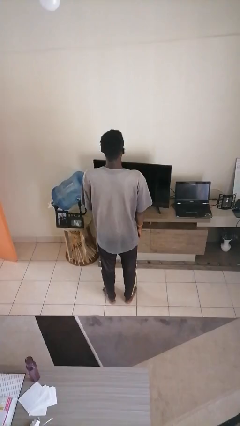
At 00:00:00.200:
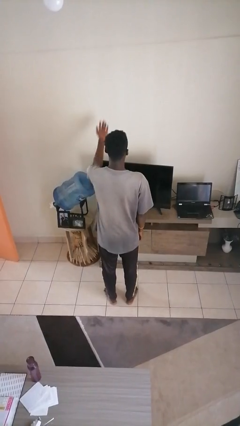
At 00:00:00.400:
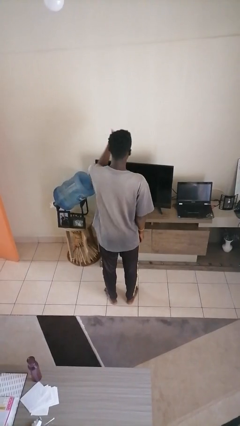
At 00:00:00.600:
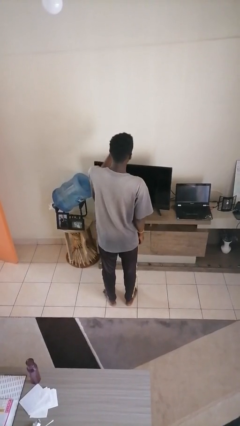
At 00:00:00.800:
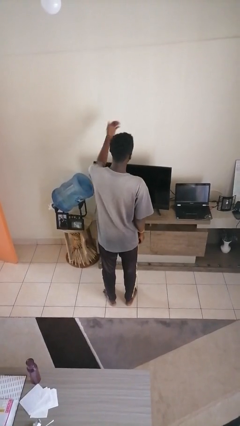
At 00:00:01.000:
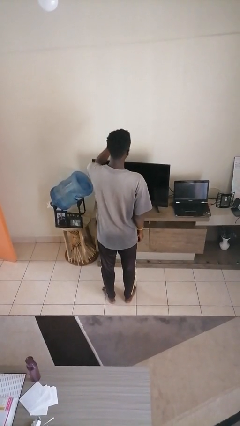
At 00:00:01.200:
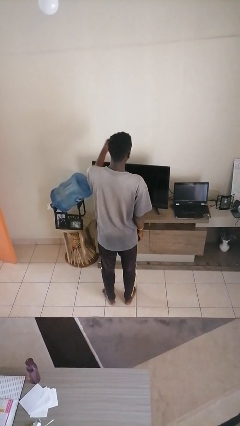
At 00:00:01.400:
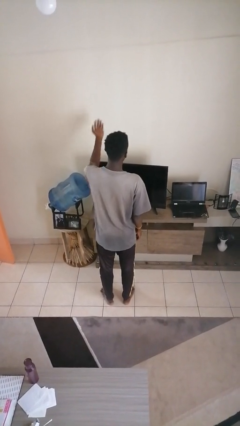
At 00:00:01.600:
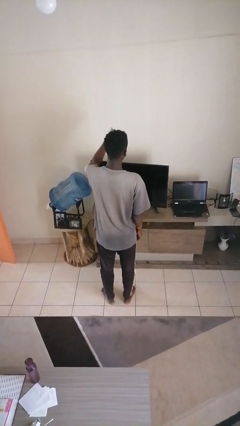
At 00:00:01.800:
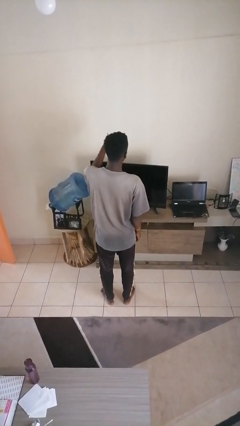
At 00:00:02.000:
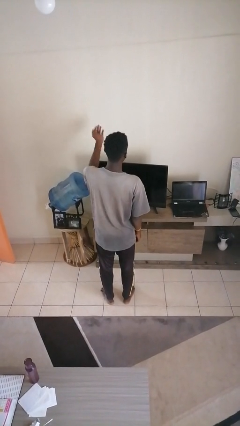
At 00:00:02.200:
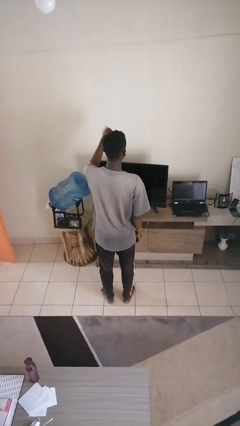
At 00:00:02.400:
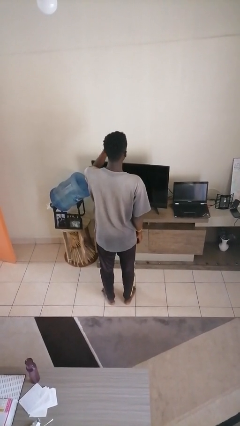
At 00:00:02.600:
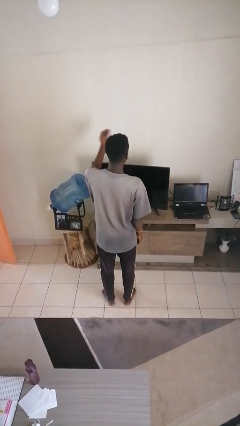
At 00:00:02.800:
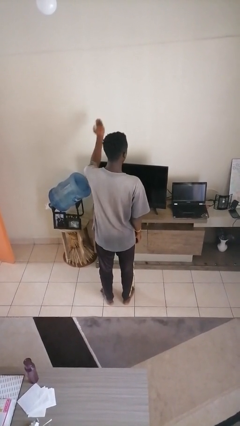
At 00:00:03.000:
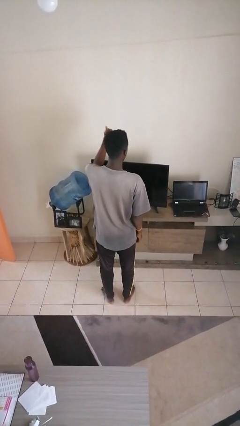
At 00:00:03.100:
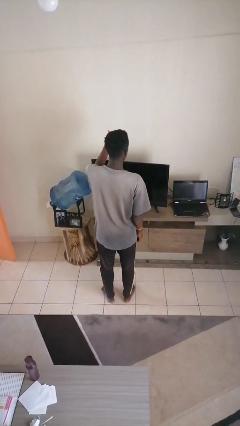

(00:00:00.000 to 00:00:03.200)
person gestures come here

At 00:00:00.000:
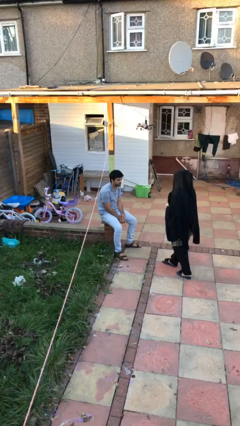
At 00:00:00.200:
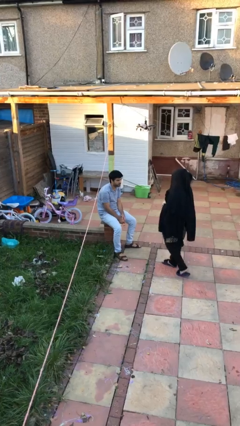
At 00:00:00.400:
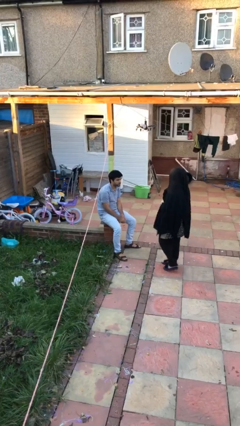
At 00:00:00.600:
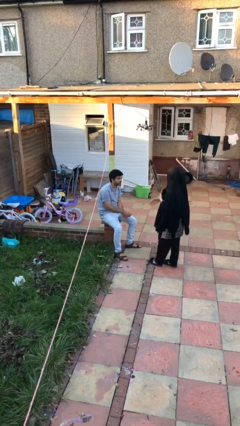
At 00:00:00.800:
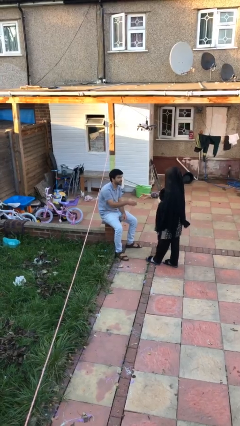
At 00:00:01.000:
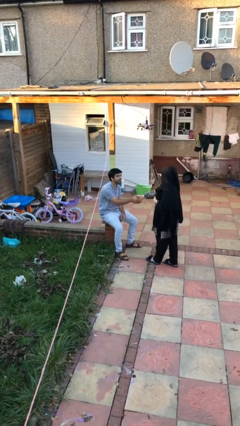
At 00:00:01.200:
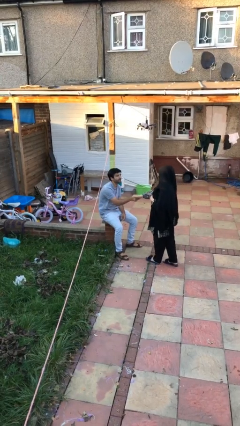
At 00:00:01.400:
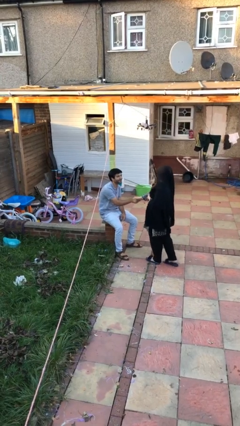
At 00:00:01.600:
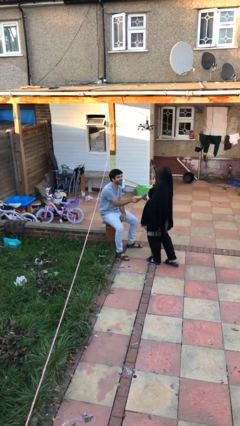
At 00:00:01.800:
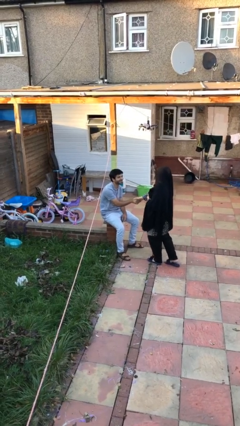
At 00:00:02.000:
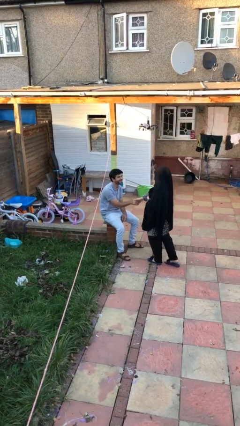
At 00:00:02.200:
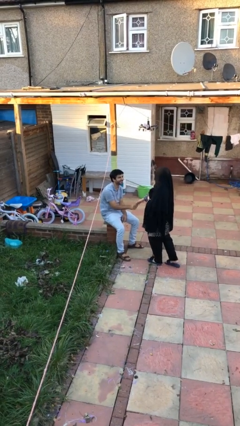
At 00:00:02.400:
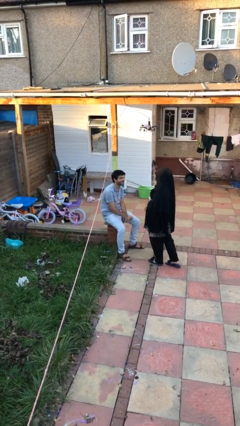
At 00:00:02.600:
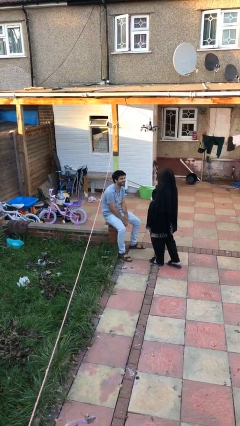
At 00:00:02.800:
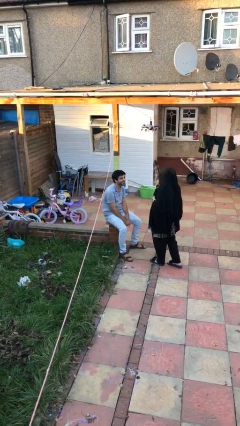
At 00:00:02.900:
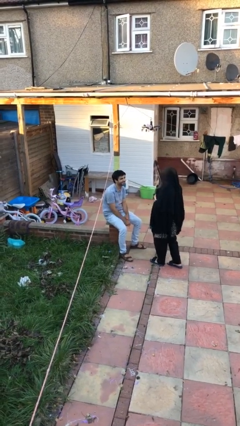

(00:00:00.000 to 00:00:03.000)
person shakes hand

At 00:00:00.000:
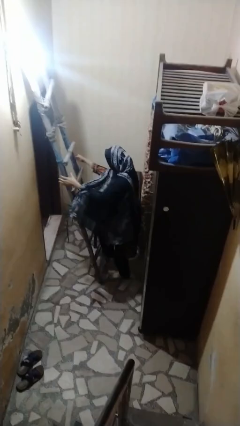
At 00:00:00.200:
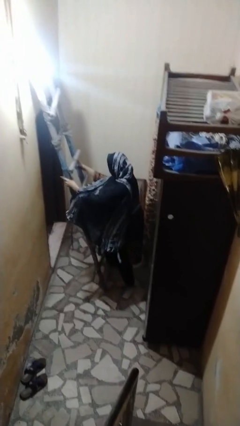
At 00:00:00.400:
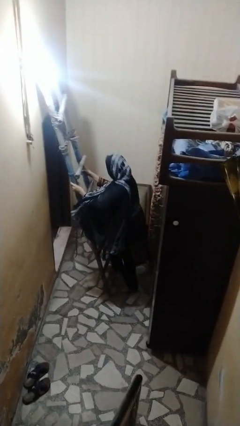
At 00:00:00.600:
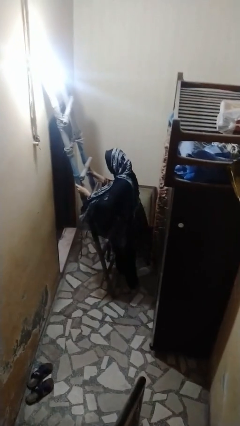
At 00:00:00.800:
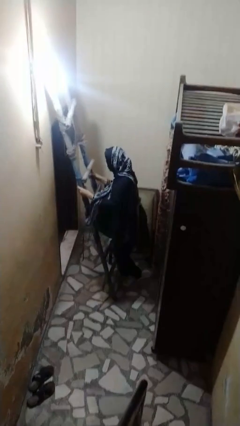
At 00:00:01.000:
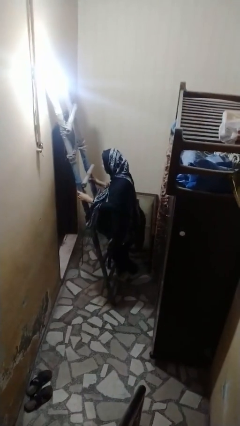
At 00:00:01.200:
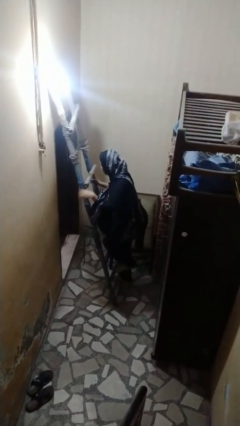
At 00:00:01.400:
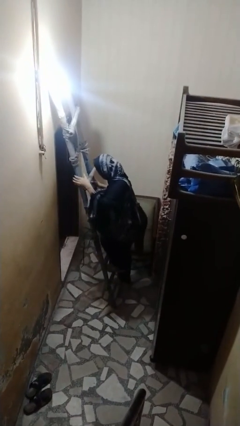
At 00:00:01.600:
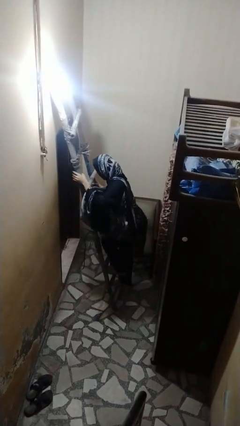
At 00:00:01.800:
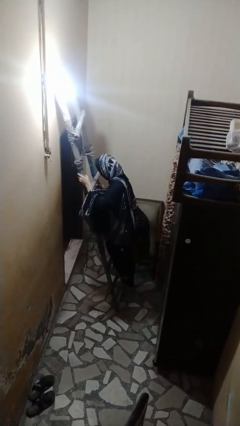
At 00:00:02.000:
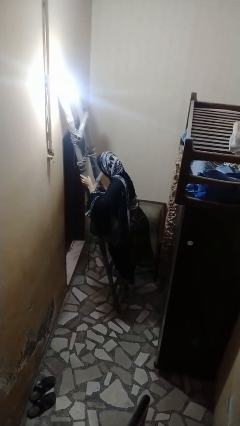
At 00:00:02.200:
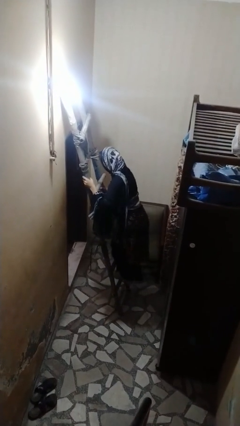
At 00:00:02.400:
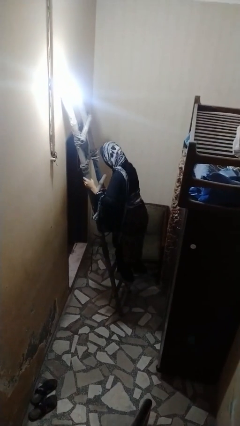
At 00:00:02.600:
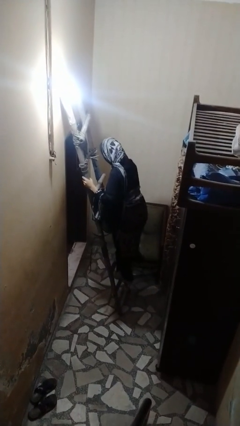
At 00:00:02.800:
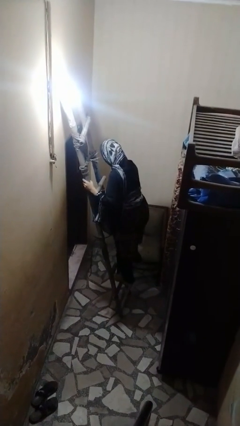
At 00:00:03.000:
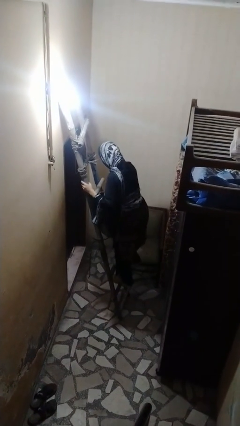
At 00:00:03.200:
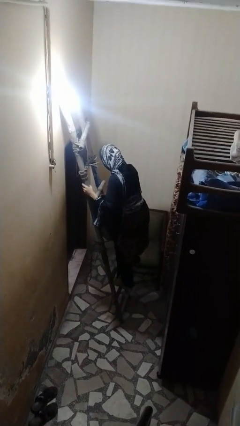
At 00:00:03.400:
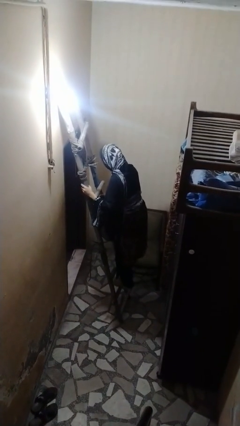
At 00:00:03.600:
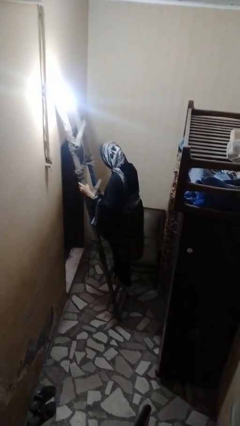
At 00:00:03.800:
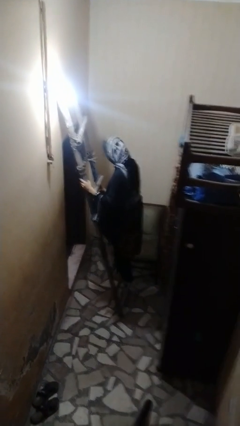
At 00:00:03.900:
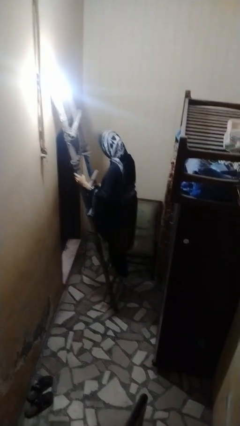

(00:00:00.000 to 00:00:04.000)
person climbs up ladder

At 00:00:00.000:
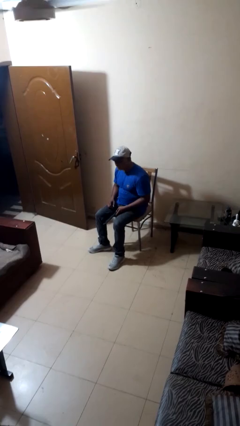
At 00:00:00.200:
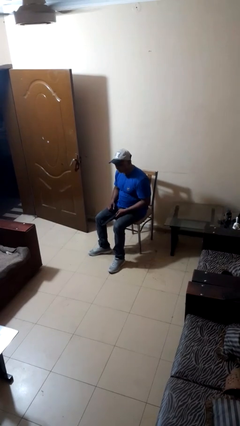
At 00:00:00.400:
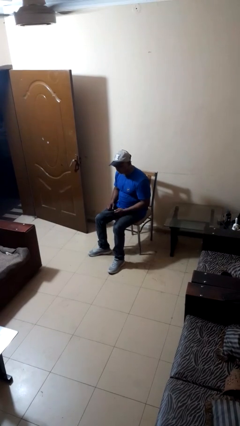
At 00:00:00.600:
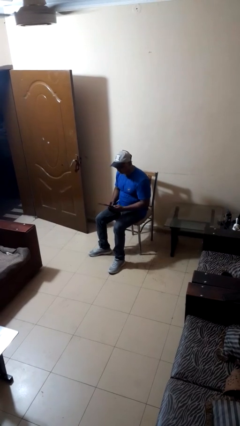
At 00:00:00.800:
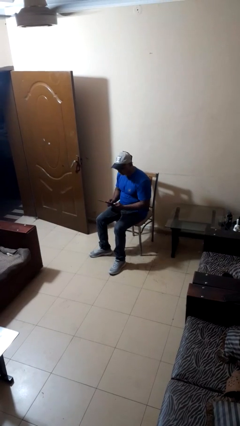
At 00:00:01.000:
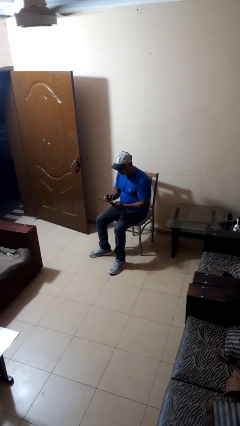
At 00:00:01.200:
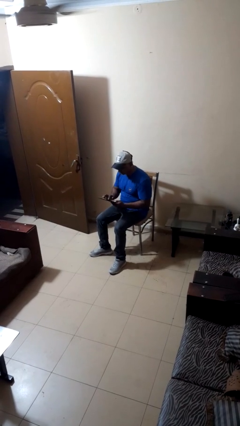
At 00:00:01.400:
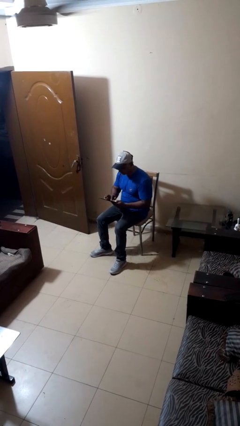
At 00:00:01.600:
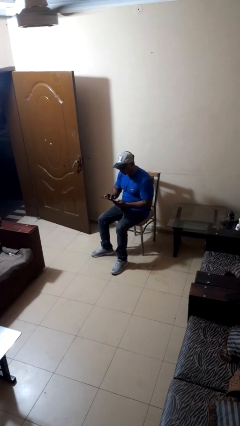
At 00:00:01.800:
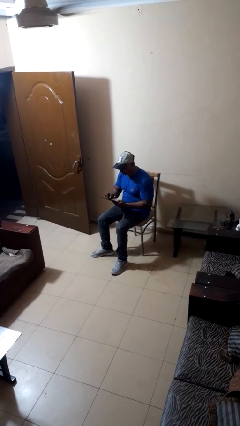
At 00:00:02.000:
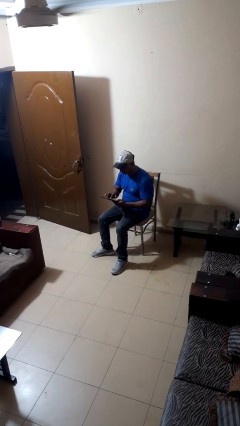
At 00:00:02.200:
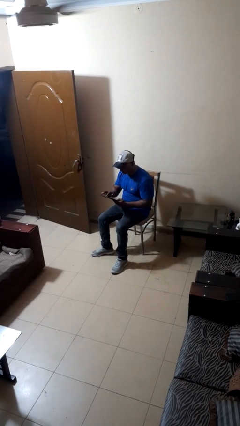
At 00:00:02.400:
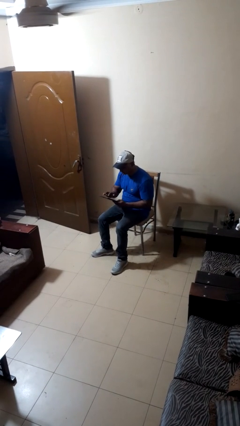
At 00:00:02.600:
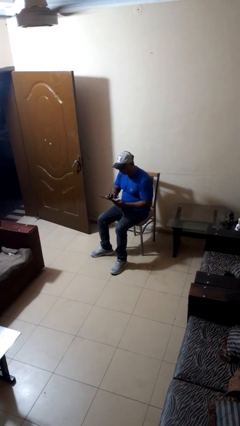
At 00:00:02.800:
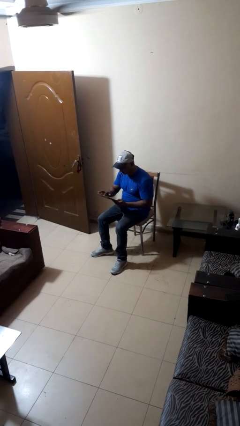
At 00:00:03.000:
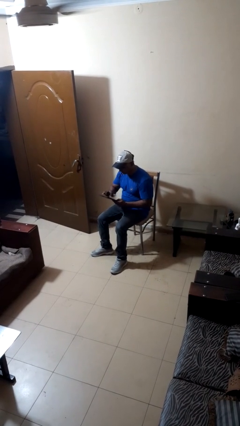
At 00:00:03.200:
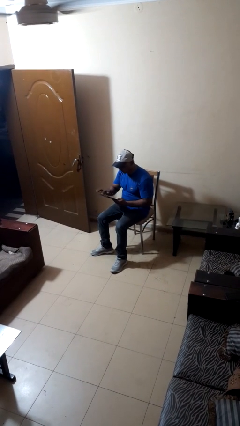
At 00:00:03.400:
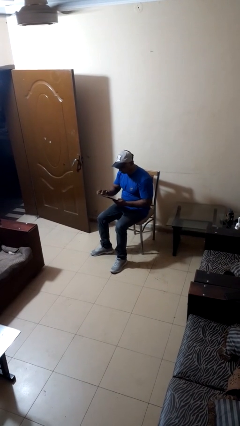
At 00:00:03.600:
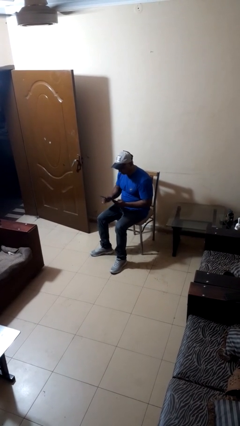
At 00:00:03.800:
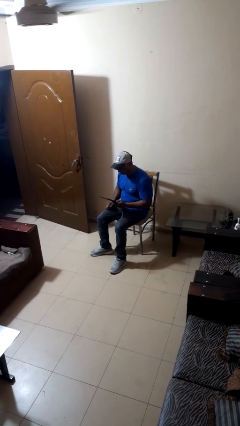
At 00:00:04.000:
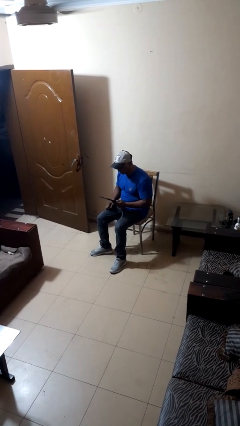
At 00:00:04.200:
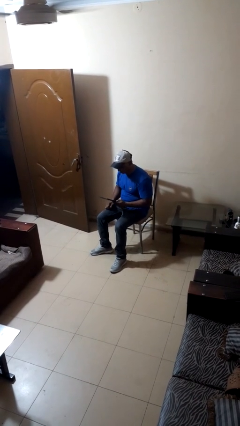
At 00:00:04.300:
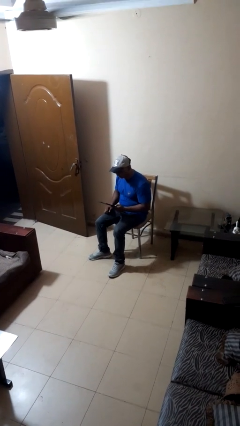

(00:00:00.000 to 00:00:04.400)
person interacts with tablet

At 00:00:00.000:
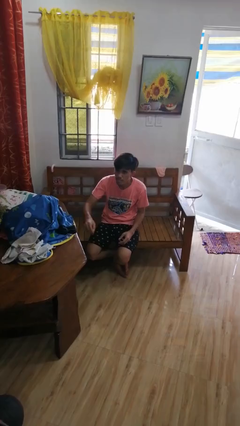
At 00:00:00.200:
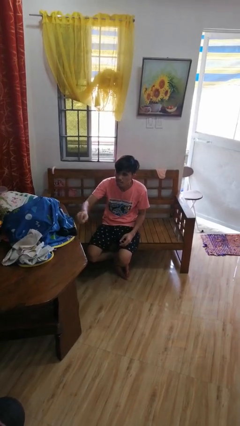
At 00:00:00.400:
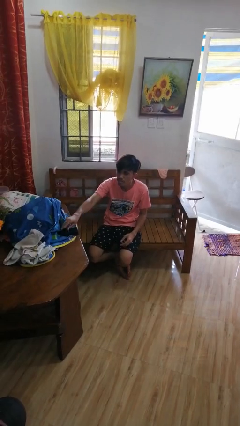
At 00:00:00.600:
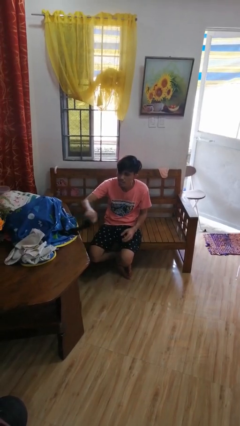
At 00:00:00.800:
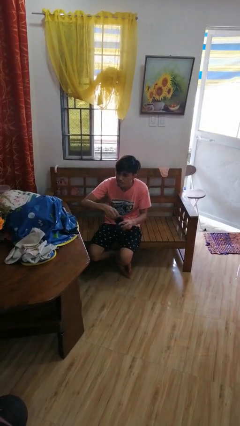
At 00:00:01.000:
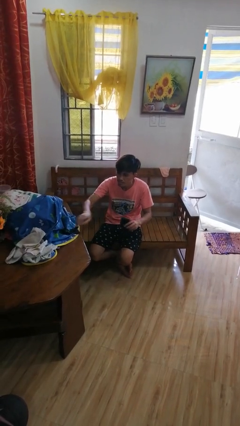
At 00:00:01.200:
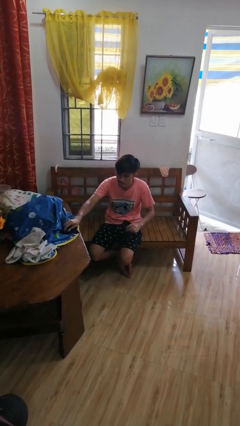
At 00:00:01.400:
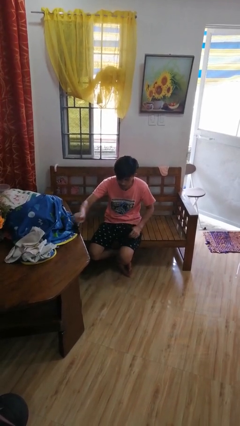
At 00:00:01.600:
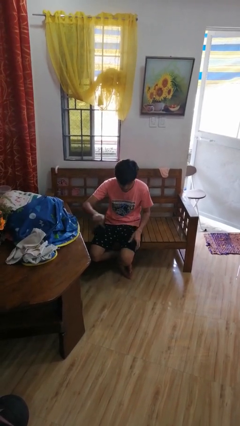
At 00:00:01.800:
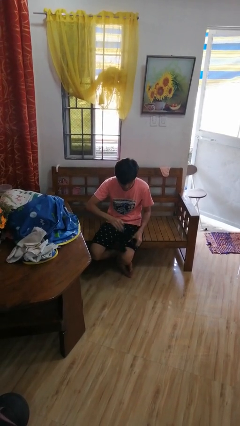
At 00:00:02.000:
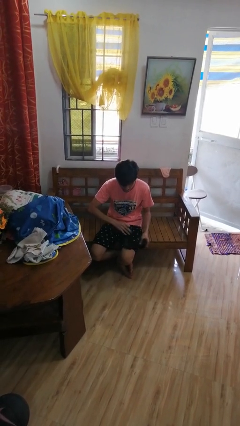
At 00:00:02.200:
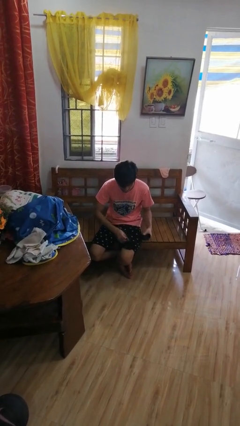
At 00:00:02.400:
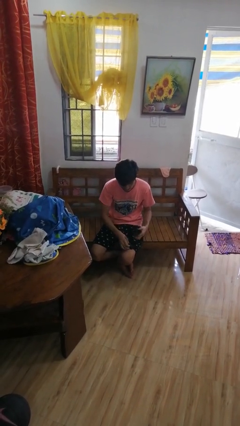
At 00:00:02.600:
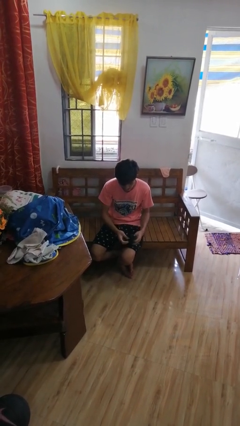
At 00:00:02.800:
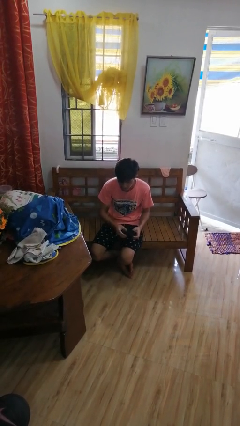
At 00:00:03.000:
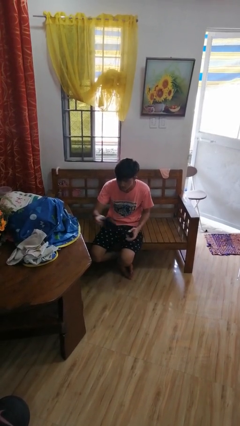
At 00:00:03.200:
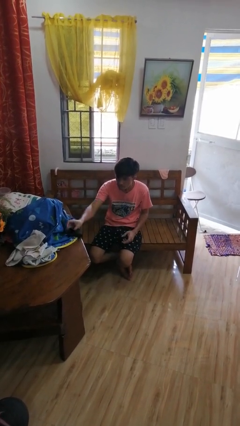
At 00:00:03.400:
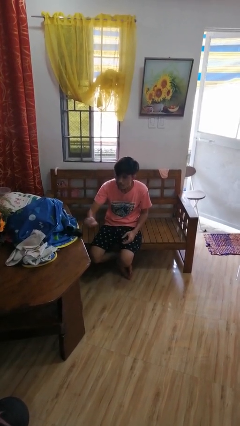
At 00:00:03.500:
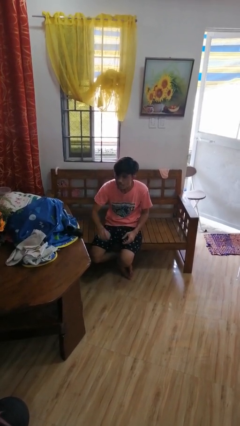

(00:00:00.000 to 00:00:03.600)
person folds socks
